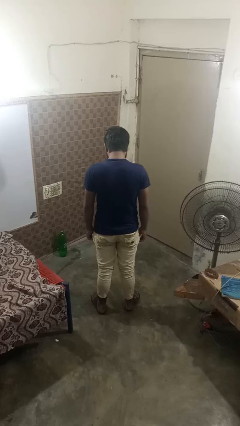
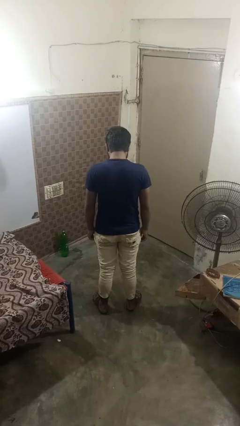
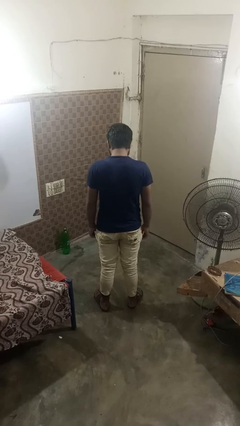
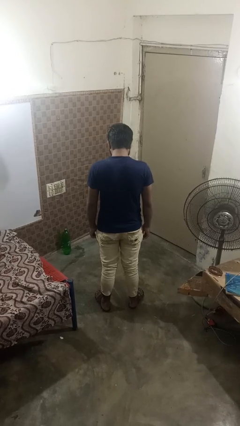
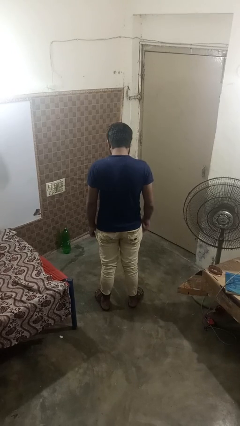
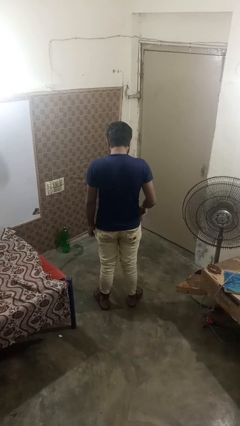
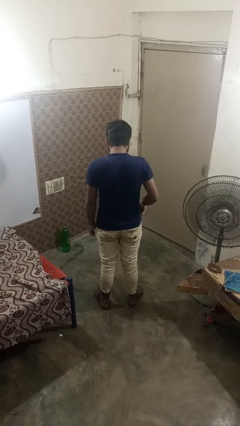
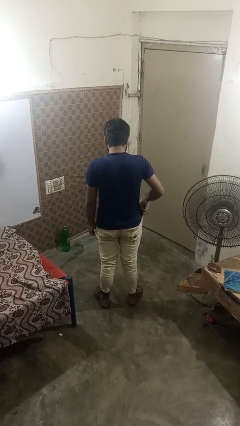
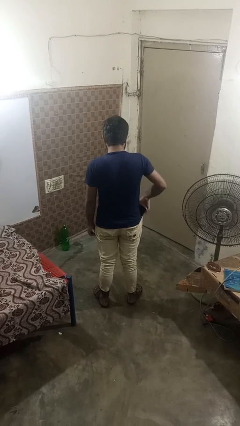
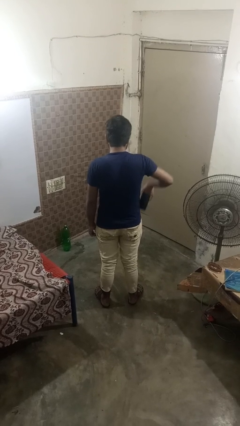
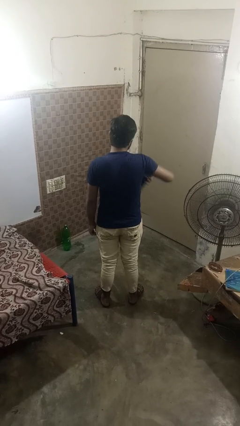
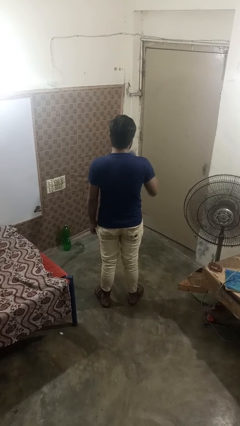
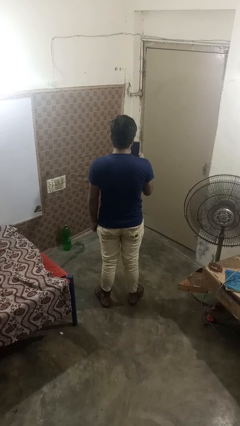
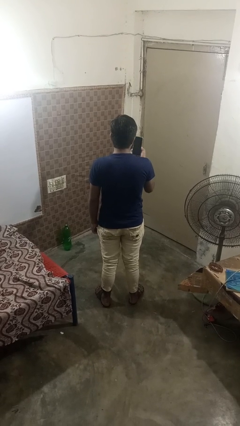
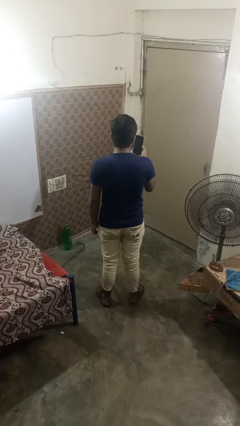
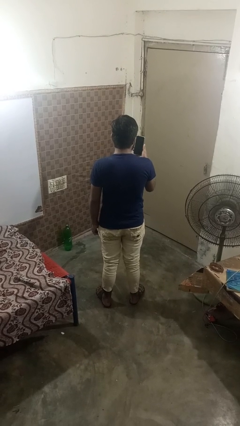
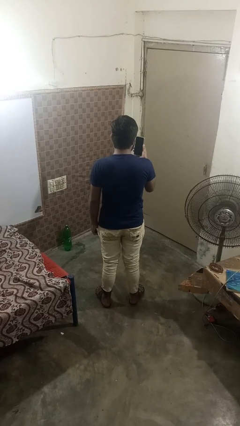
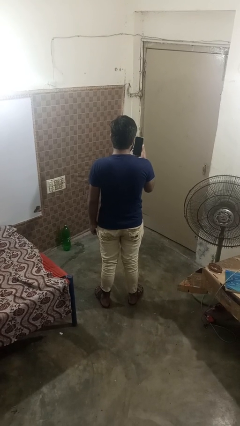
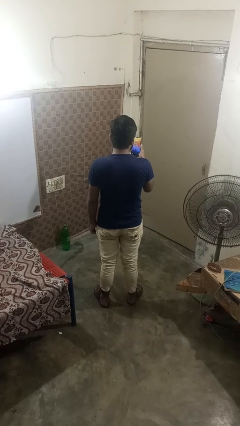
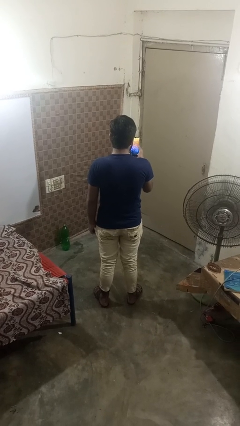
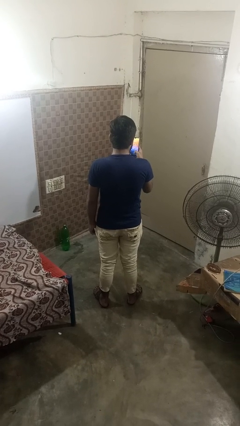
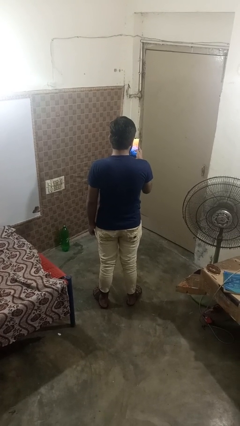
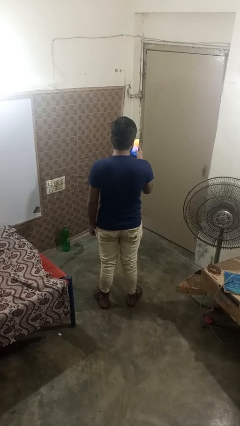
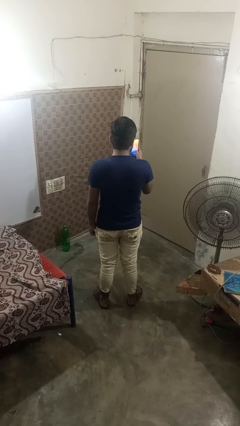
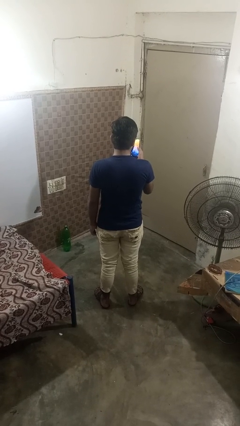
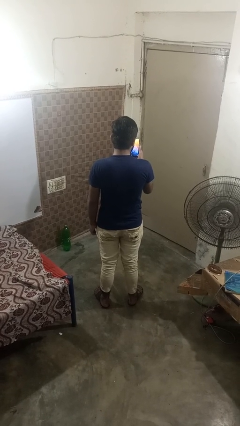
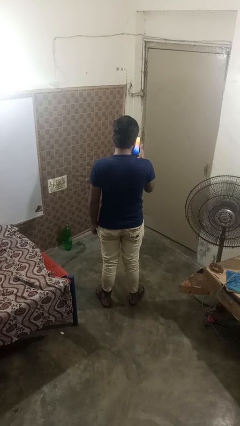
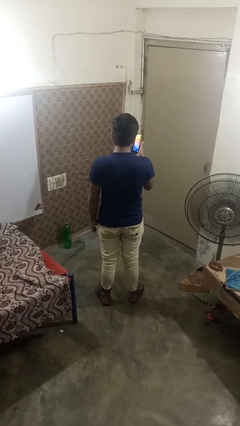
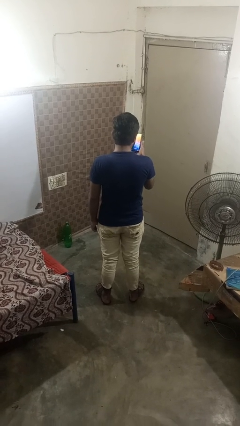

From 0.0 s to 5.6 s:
person takes phone from pocket

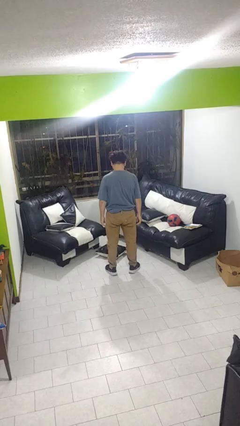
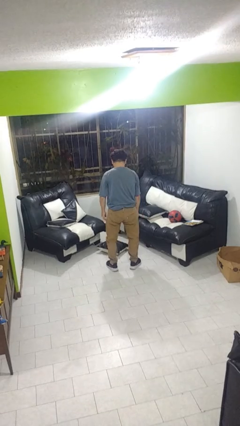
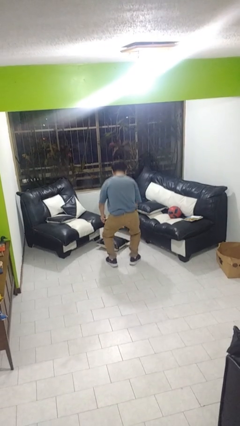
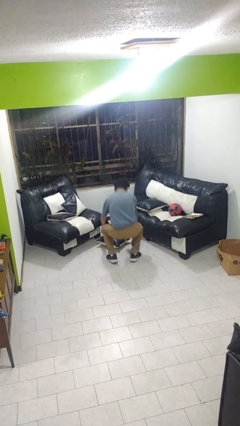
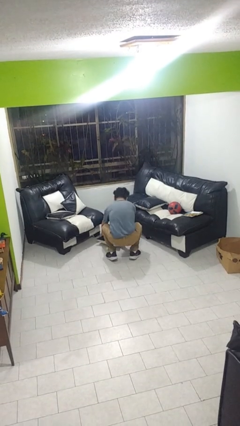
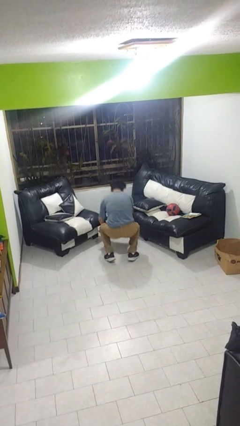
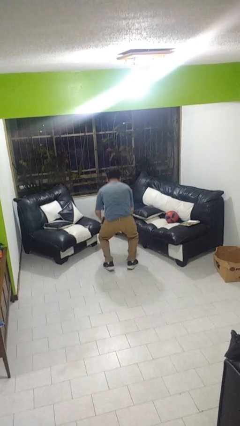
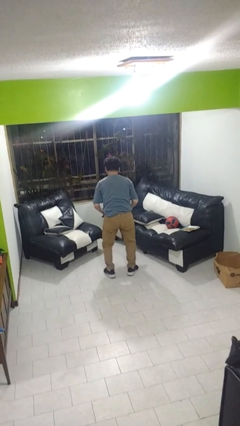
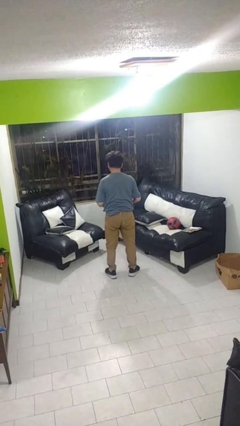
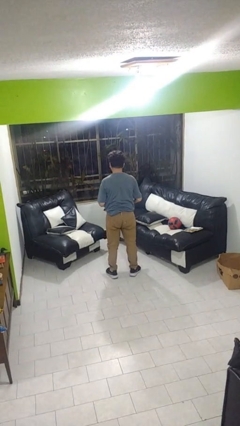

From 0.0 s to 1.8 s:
person picks up object from floor

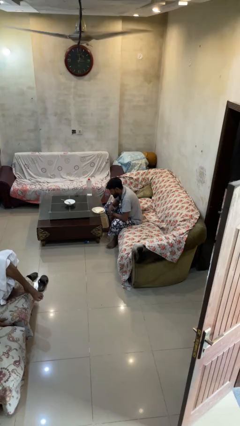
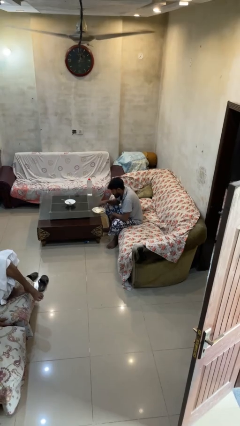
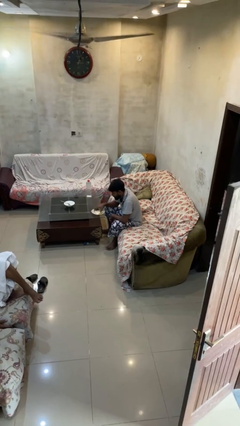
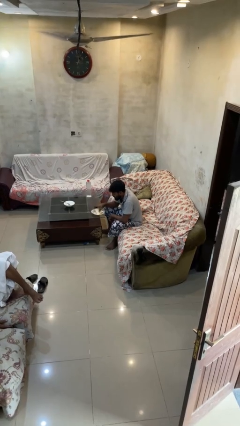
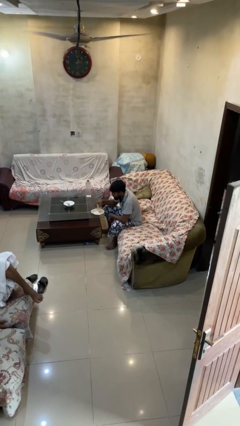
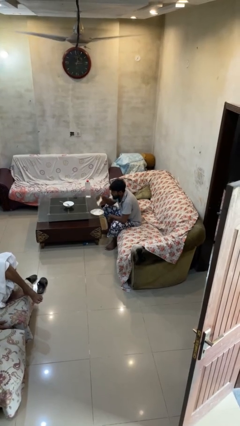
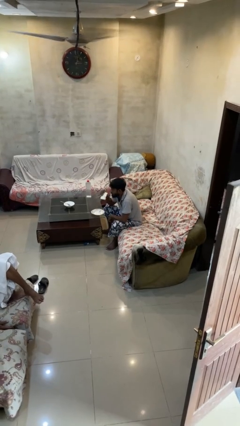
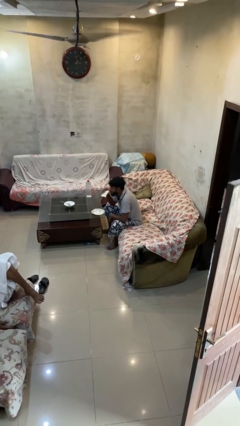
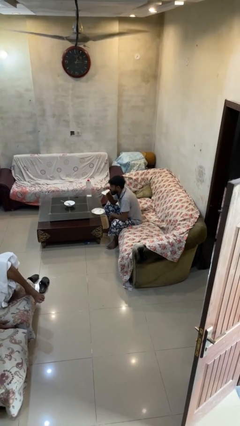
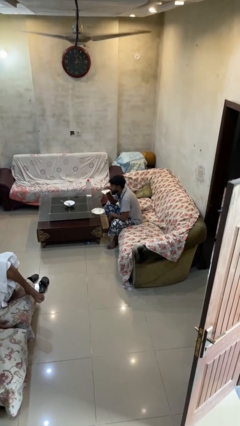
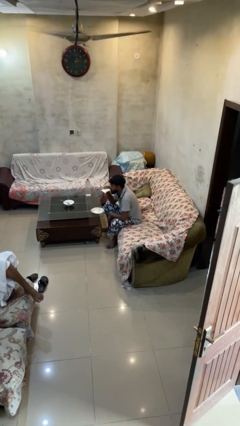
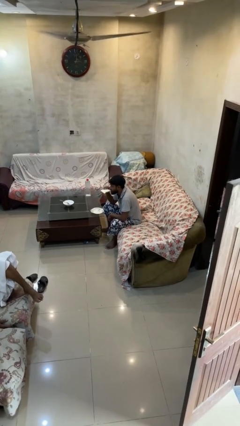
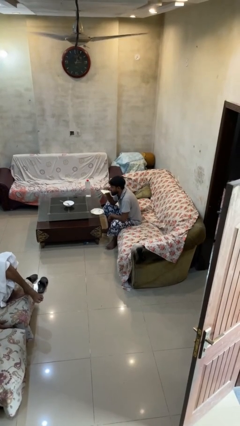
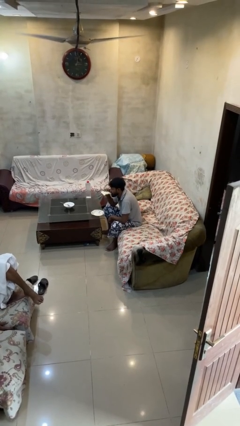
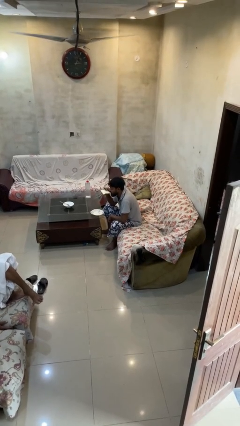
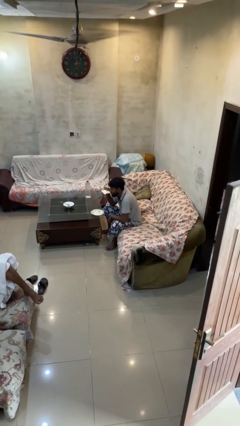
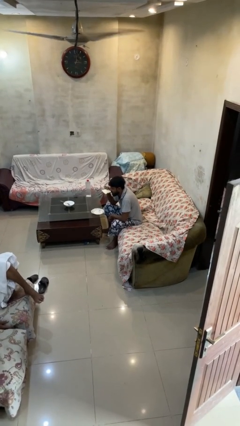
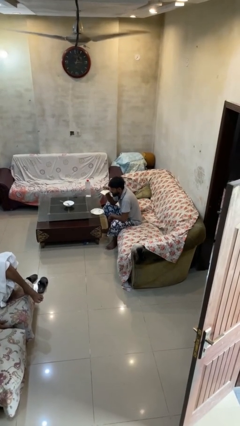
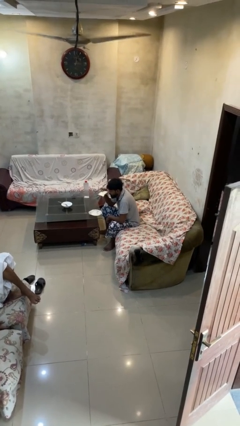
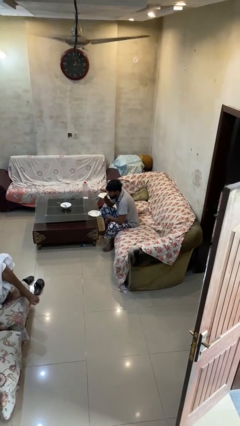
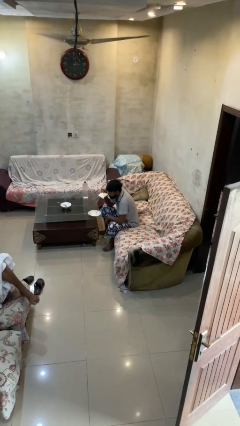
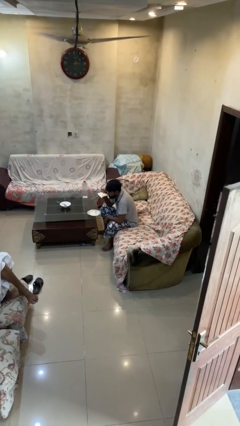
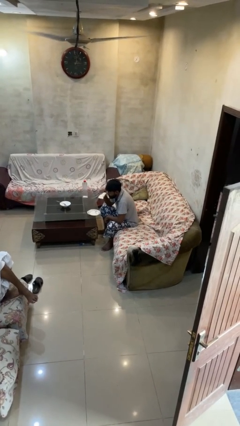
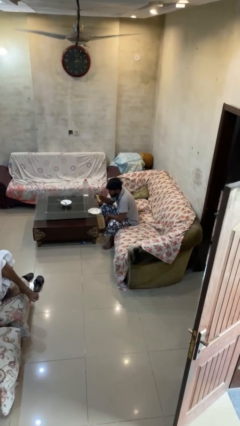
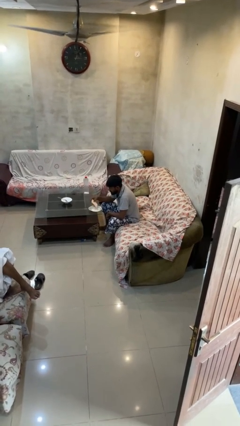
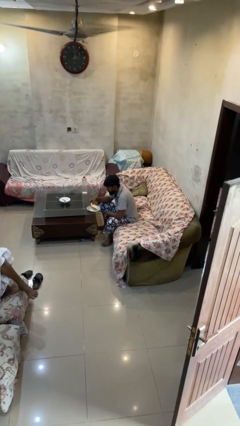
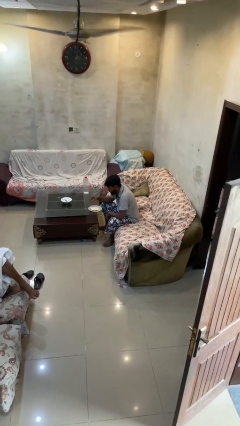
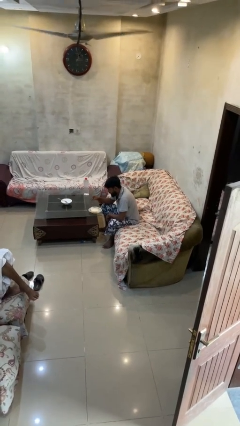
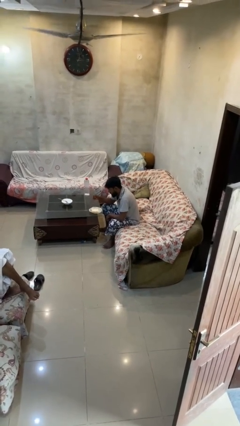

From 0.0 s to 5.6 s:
person eats with hands

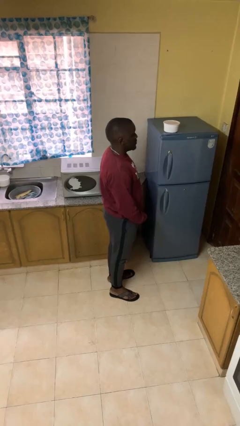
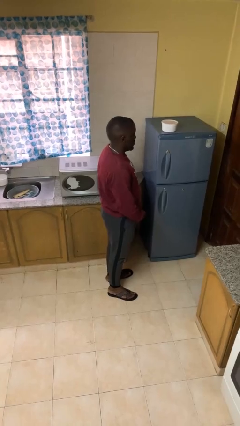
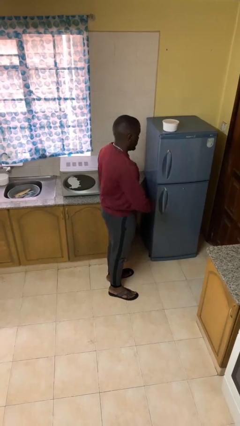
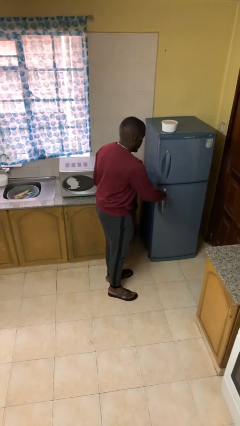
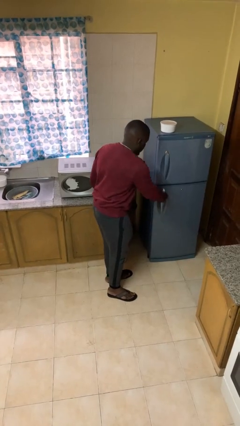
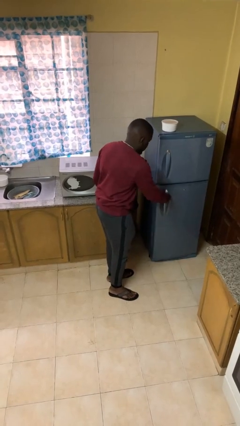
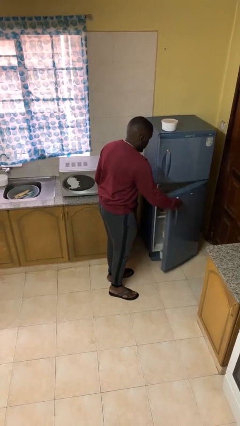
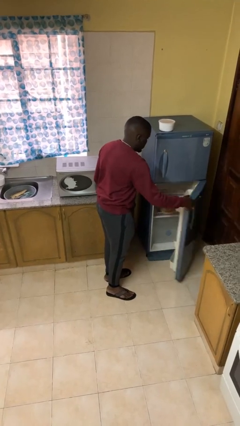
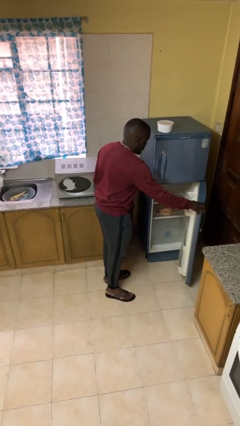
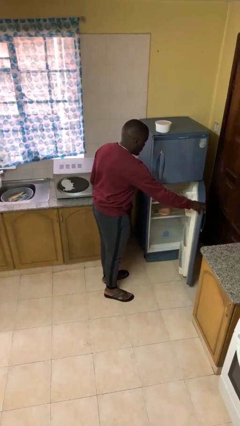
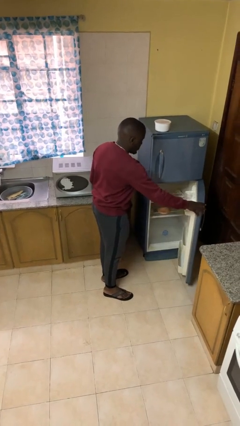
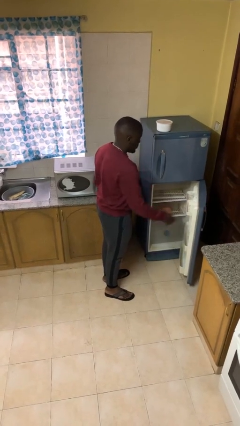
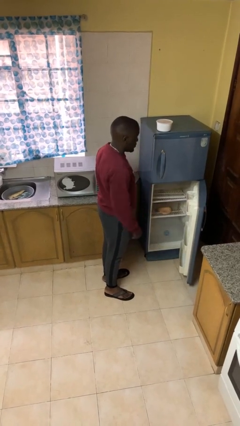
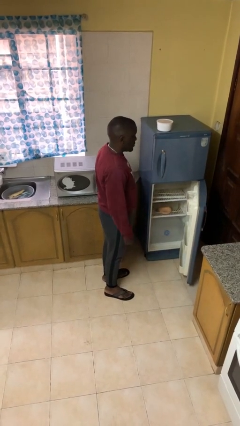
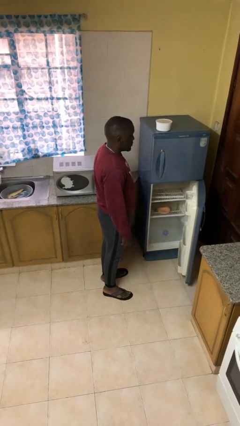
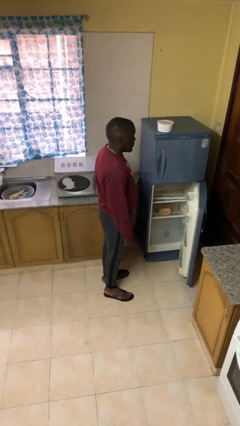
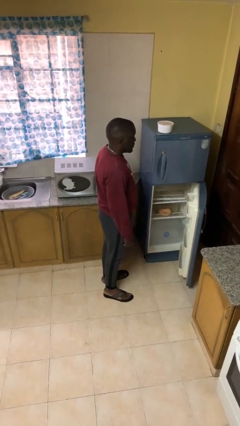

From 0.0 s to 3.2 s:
person opens refrigerator

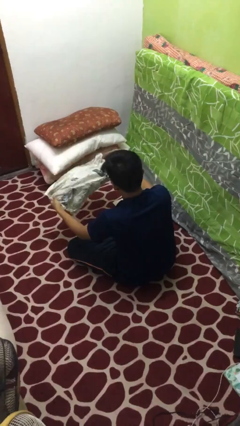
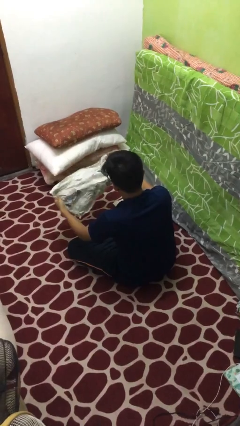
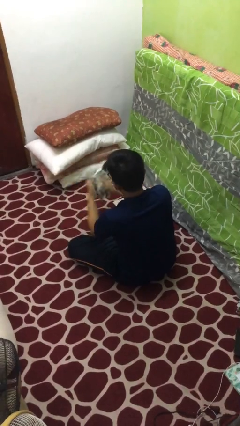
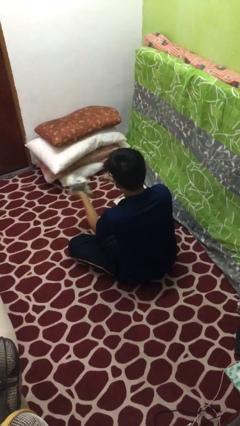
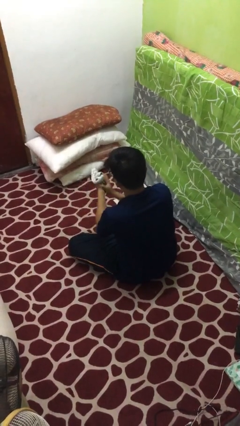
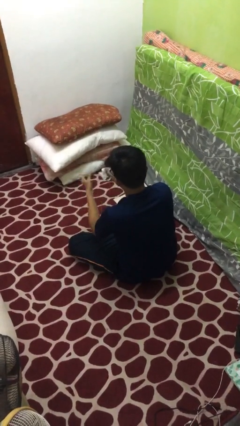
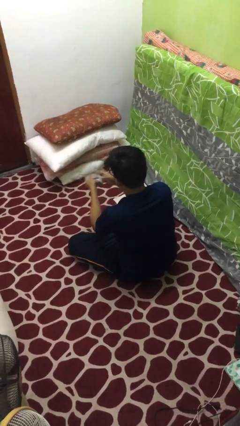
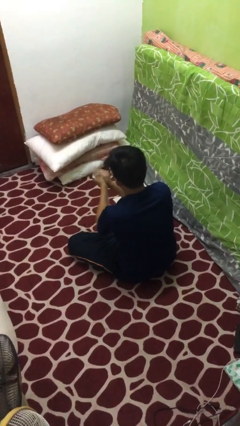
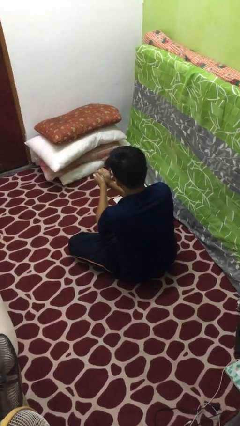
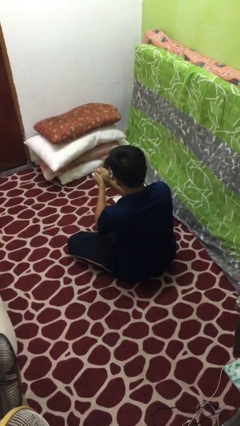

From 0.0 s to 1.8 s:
person crumples paper
